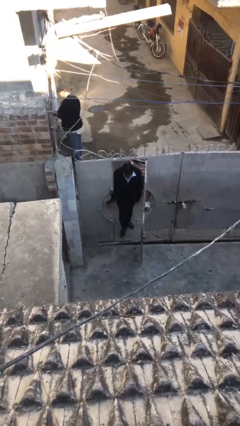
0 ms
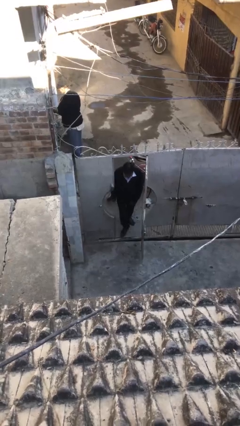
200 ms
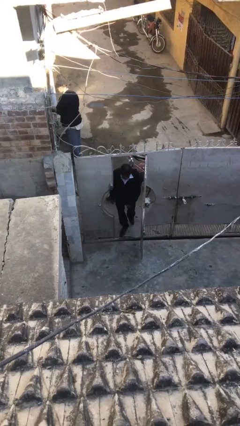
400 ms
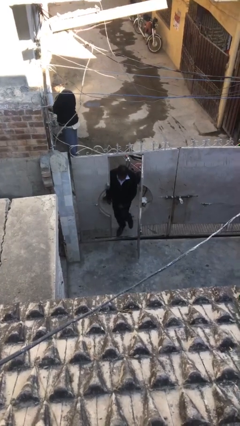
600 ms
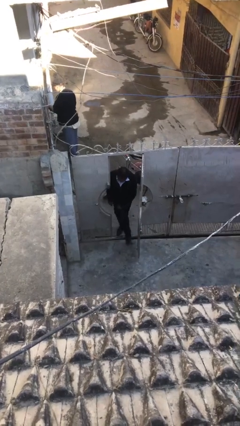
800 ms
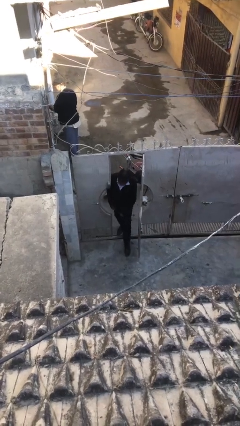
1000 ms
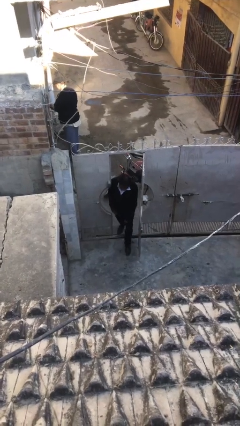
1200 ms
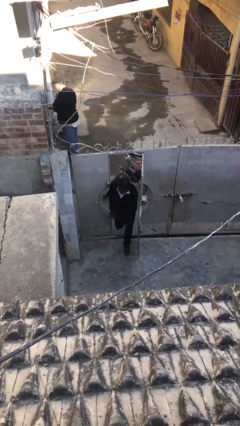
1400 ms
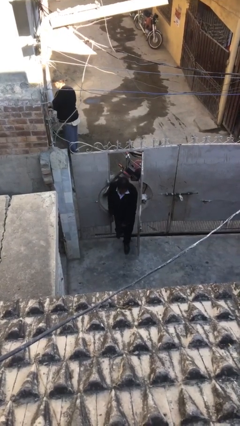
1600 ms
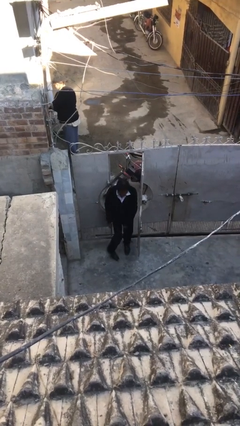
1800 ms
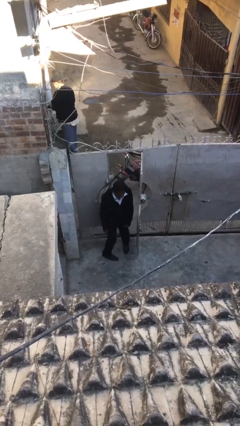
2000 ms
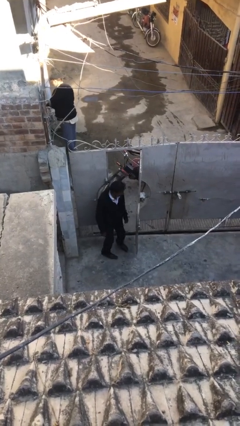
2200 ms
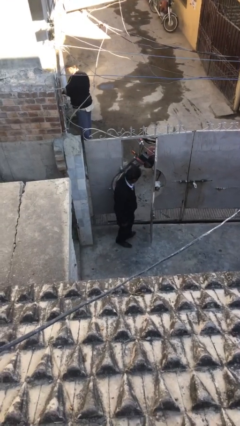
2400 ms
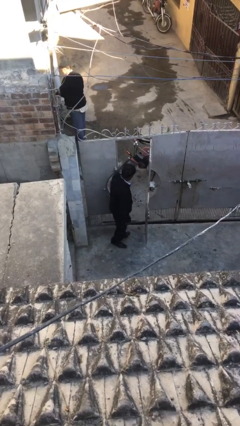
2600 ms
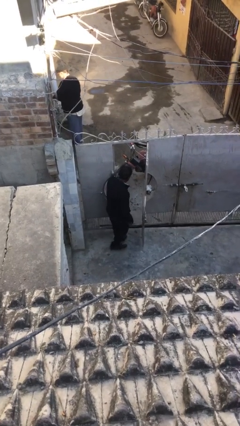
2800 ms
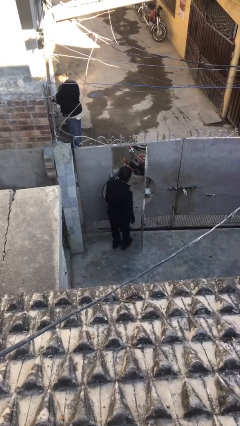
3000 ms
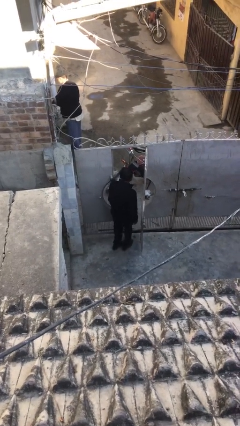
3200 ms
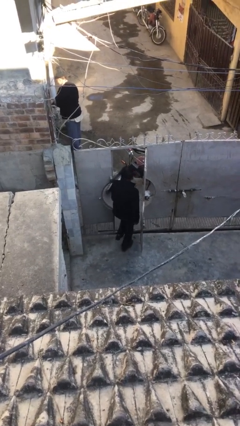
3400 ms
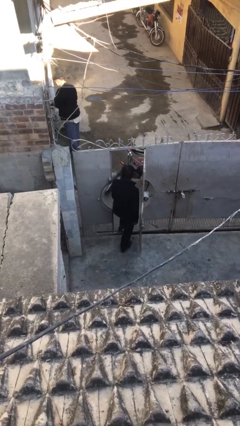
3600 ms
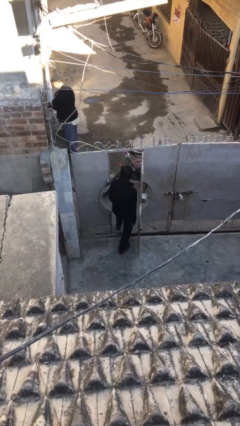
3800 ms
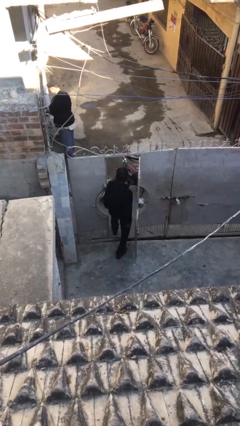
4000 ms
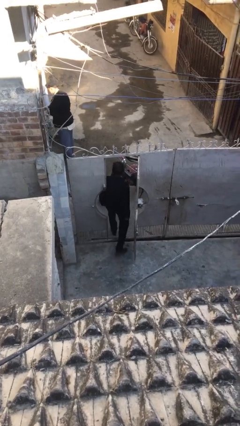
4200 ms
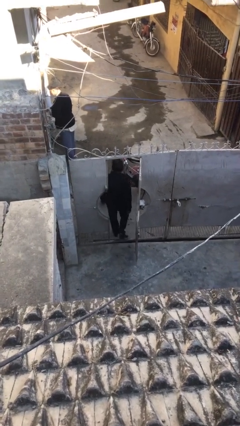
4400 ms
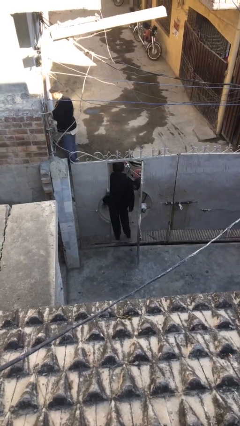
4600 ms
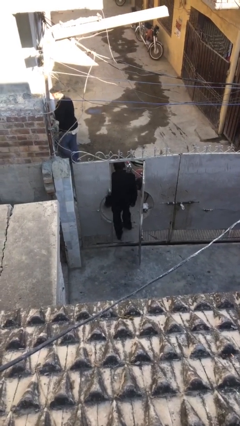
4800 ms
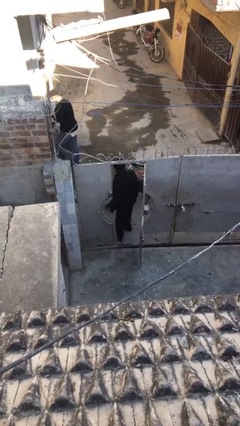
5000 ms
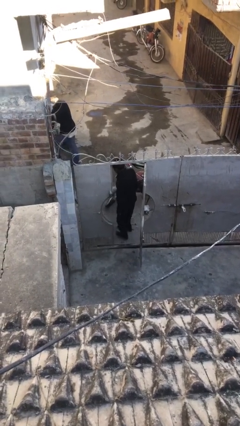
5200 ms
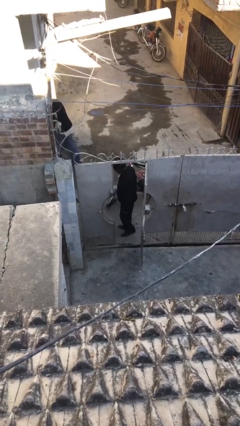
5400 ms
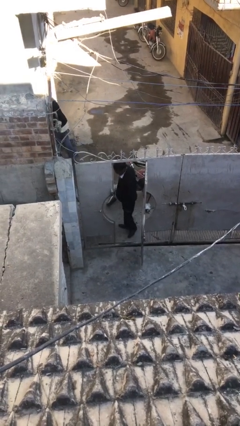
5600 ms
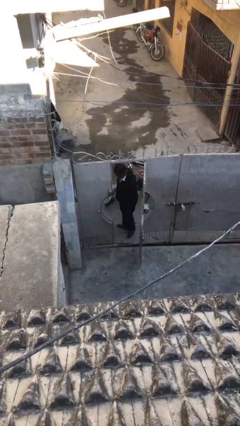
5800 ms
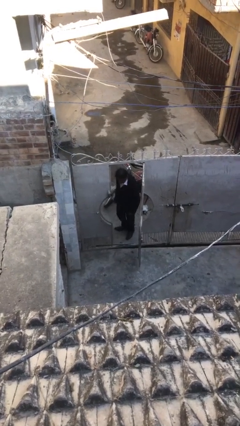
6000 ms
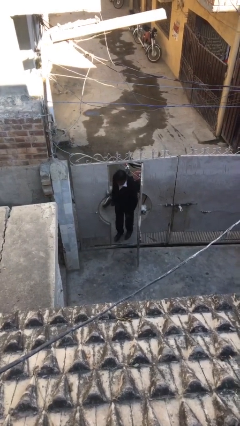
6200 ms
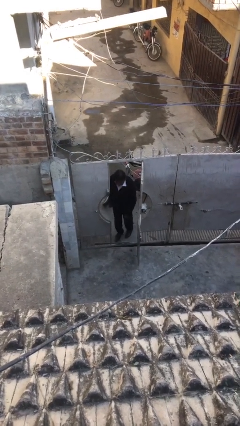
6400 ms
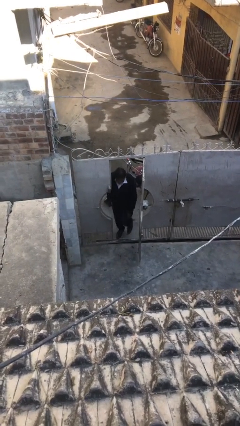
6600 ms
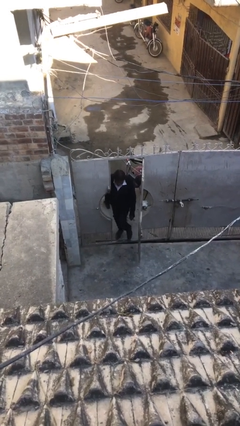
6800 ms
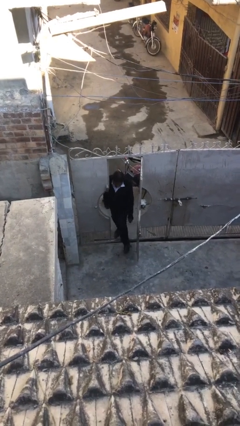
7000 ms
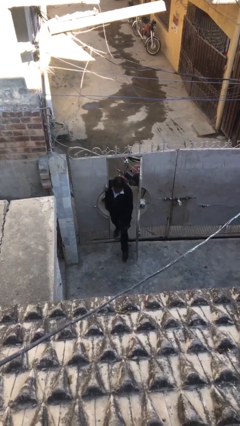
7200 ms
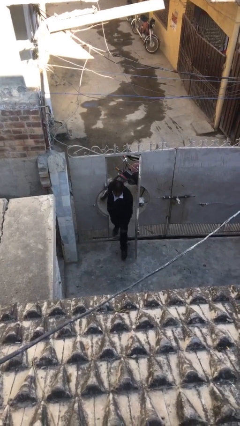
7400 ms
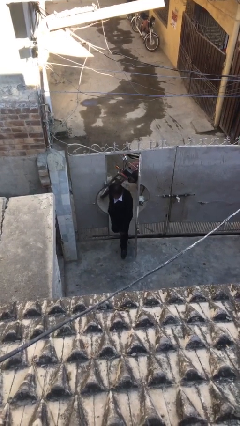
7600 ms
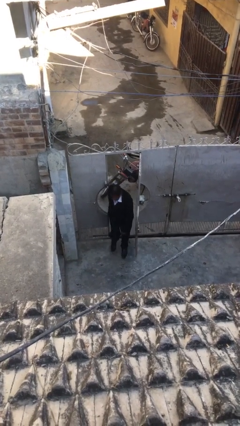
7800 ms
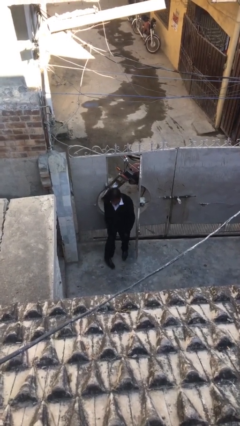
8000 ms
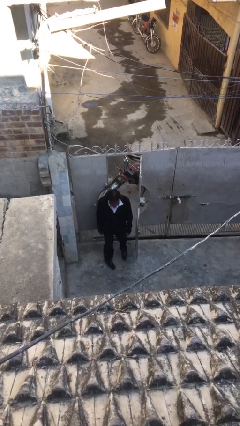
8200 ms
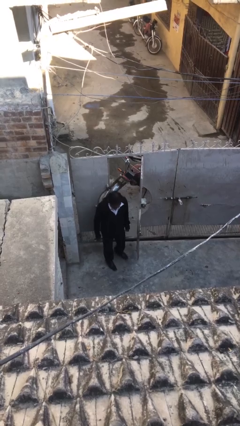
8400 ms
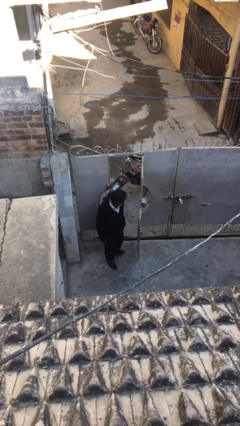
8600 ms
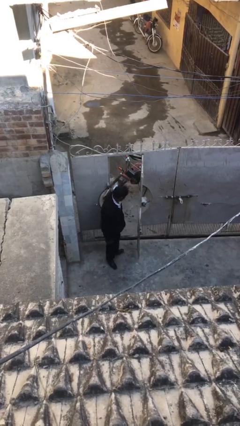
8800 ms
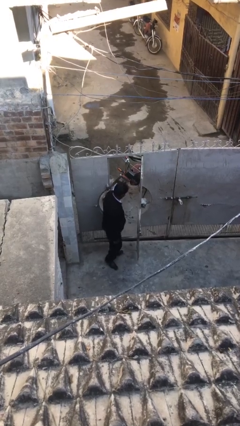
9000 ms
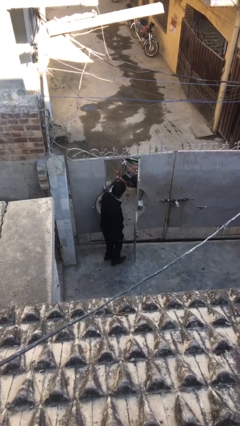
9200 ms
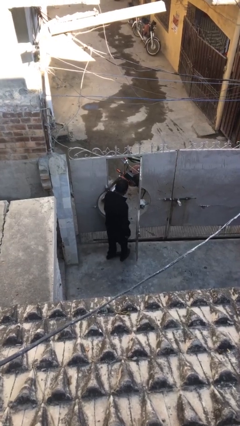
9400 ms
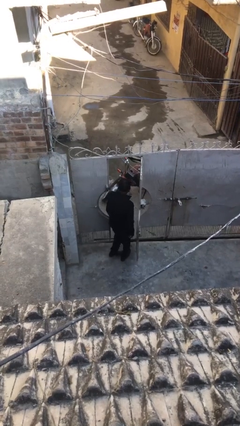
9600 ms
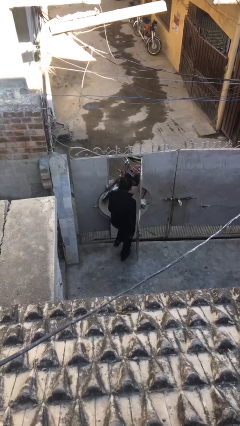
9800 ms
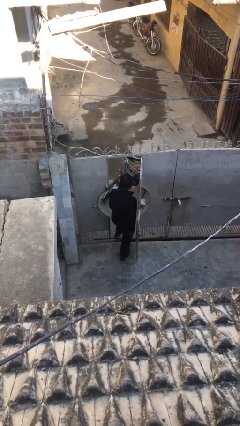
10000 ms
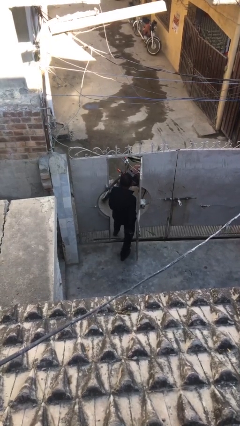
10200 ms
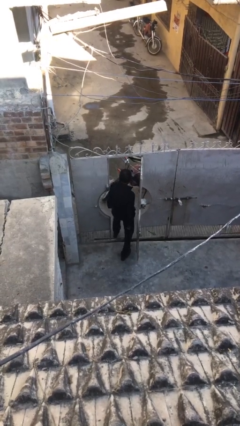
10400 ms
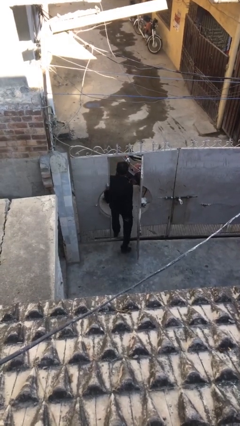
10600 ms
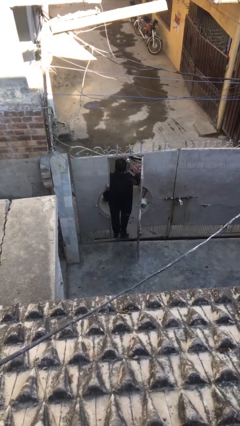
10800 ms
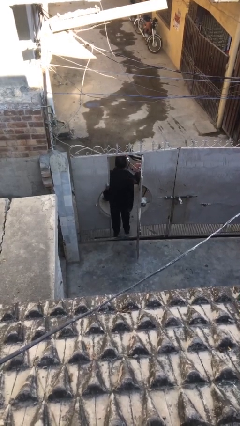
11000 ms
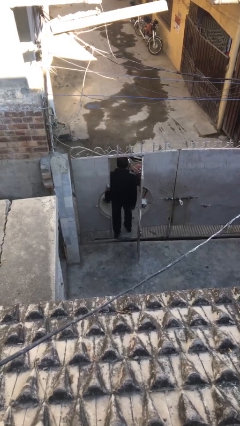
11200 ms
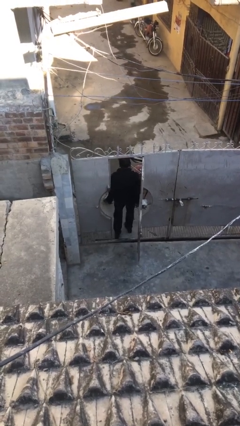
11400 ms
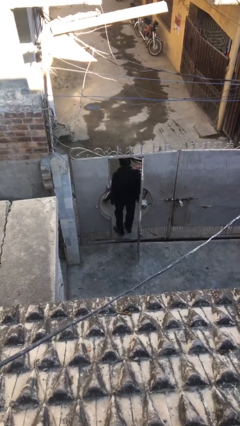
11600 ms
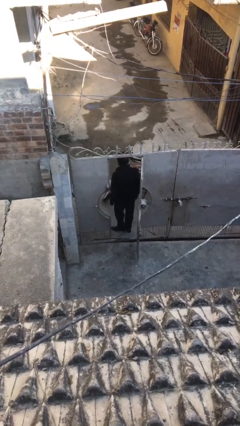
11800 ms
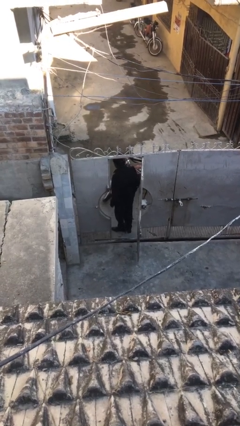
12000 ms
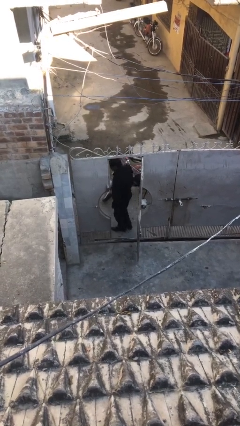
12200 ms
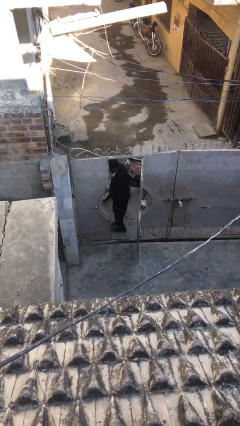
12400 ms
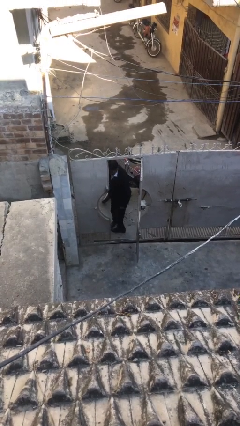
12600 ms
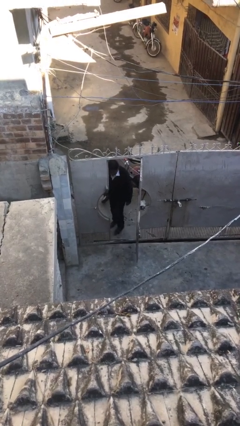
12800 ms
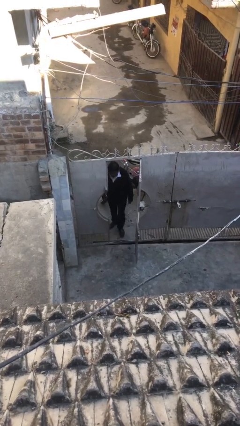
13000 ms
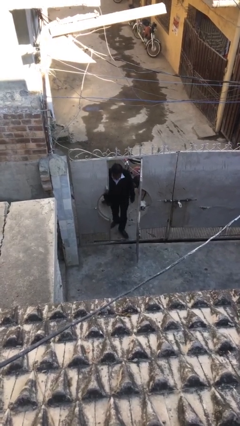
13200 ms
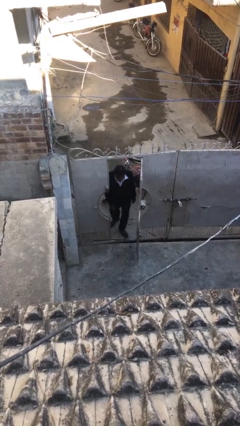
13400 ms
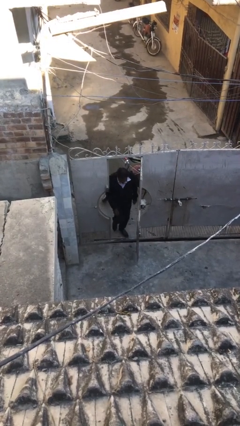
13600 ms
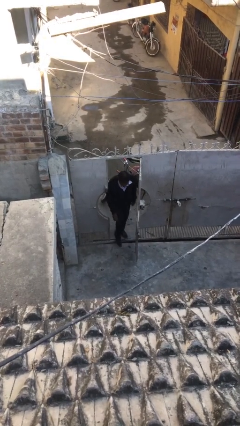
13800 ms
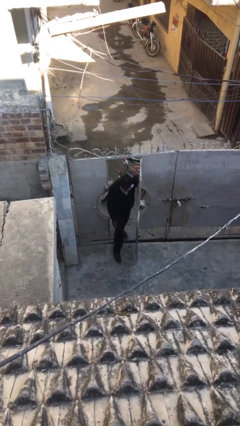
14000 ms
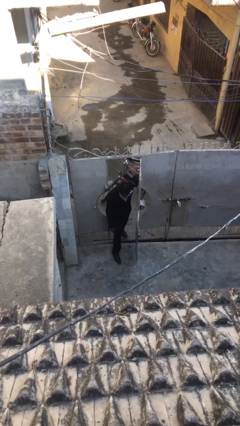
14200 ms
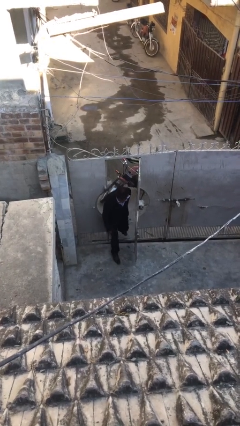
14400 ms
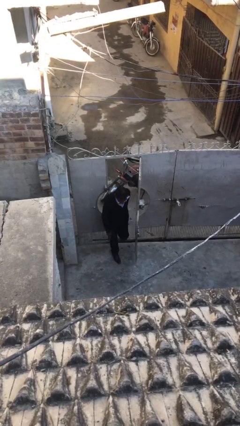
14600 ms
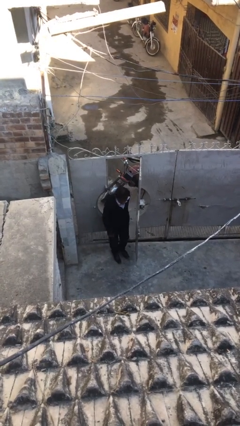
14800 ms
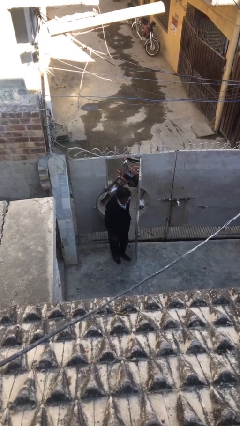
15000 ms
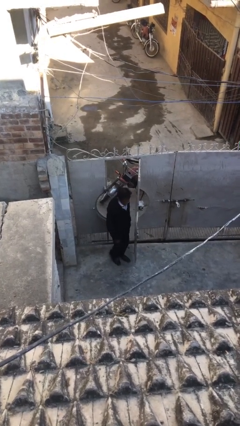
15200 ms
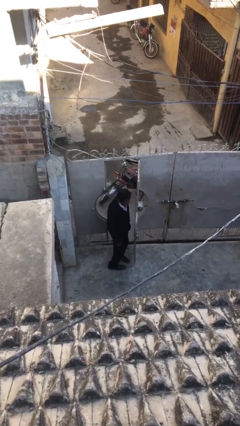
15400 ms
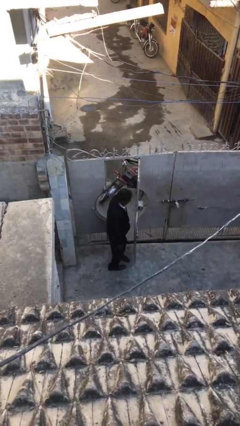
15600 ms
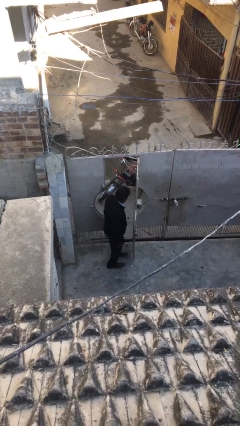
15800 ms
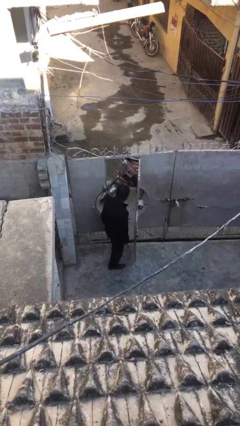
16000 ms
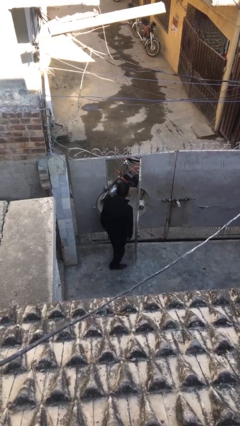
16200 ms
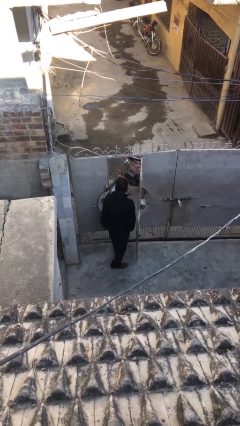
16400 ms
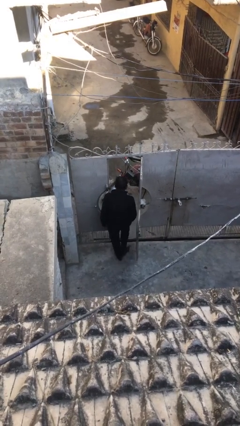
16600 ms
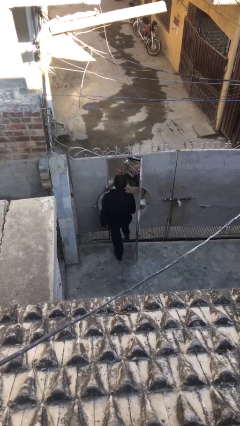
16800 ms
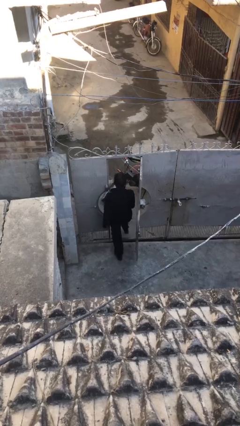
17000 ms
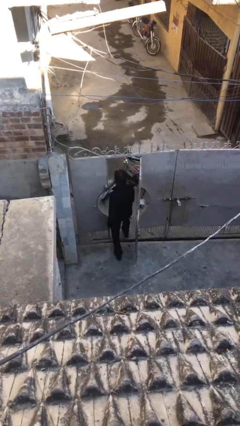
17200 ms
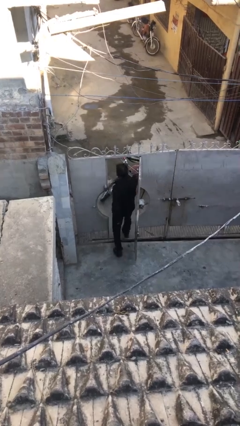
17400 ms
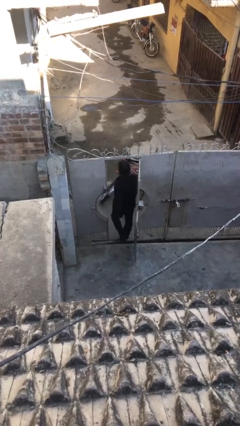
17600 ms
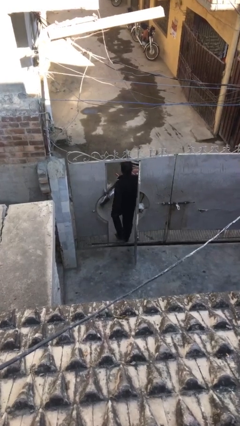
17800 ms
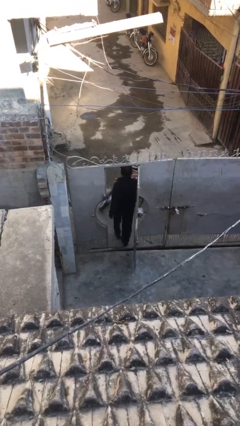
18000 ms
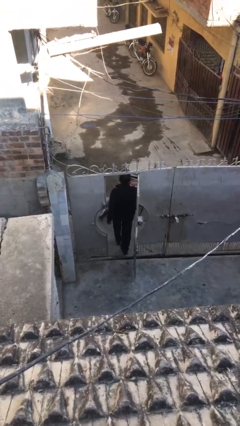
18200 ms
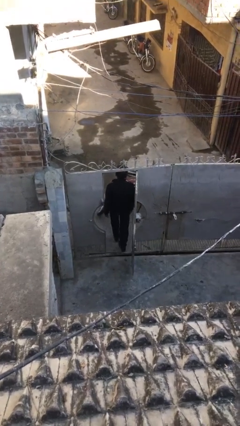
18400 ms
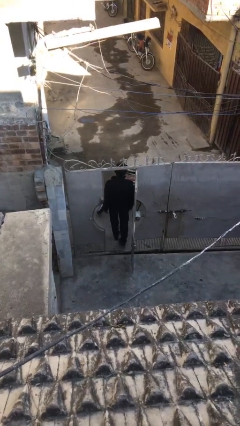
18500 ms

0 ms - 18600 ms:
person texts on phone
